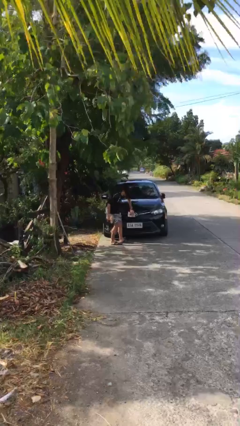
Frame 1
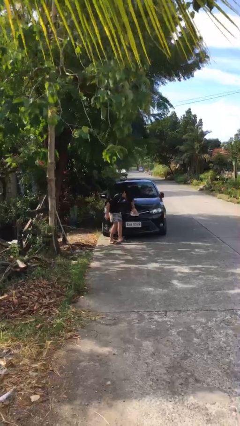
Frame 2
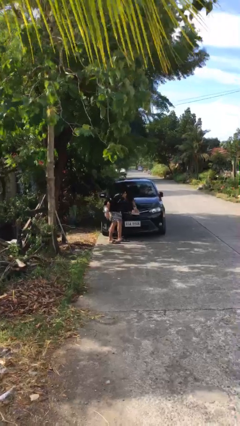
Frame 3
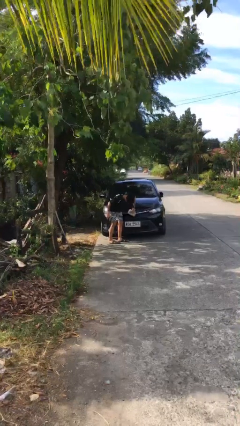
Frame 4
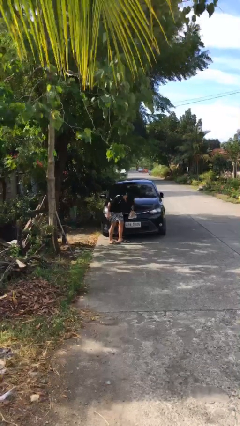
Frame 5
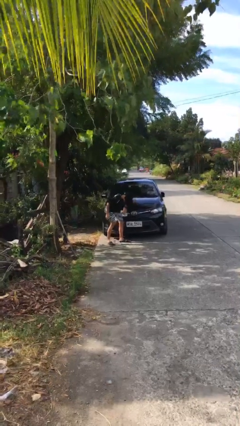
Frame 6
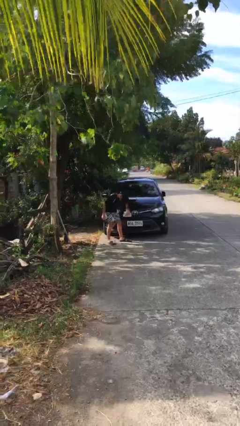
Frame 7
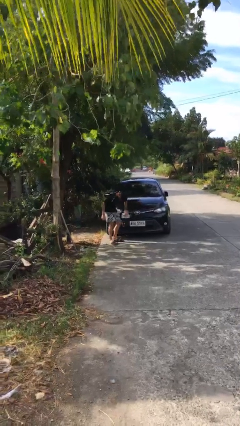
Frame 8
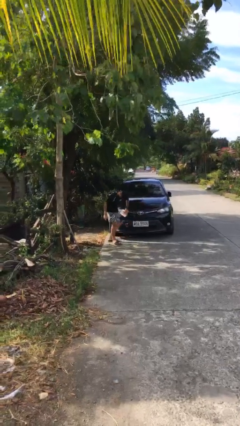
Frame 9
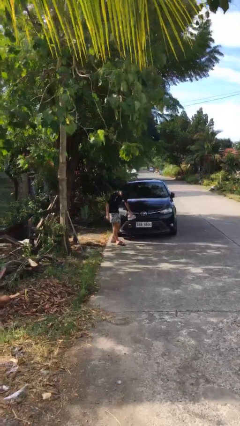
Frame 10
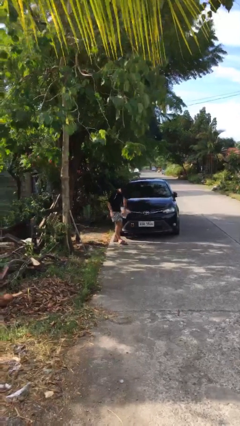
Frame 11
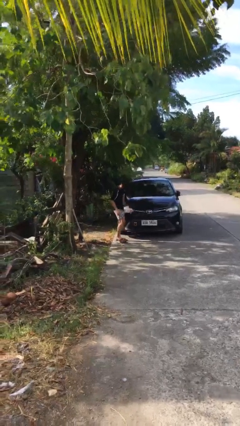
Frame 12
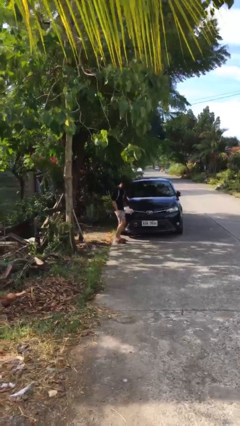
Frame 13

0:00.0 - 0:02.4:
person polishes car with rag

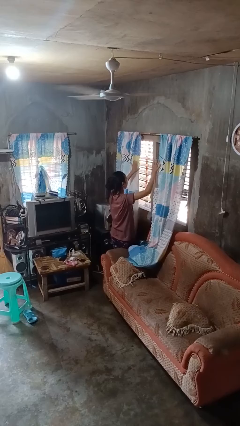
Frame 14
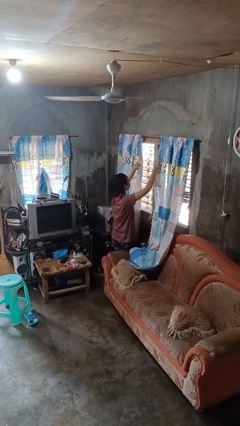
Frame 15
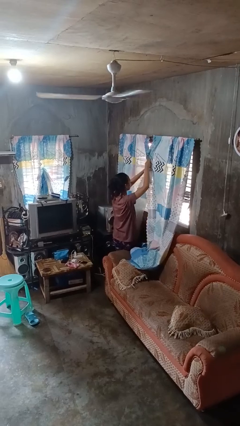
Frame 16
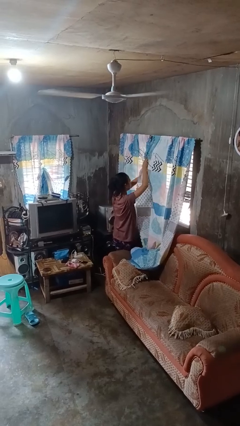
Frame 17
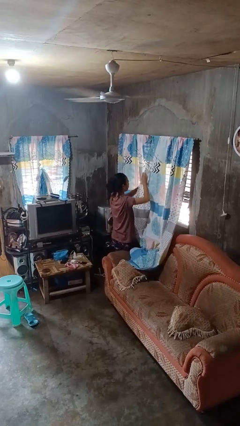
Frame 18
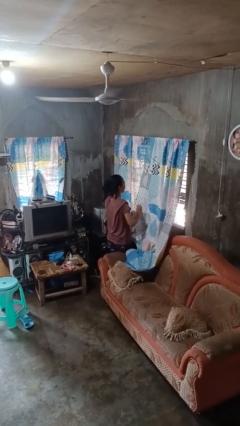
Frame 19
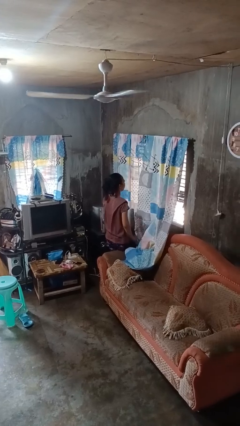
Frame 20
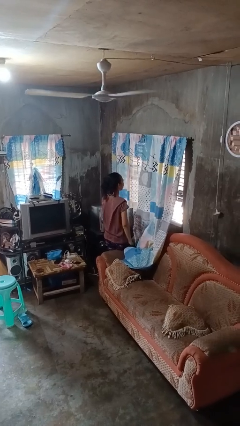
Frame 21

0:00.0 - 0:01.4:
person closes curtains

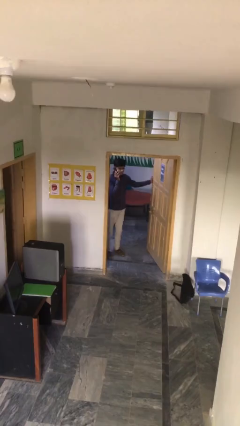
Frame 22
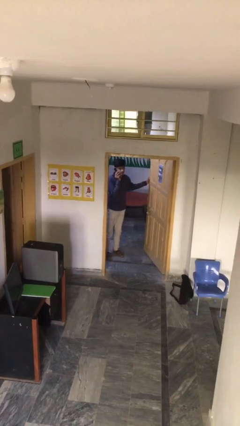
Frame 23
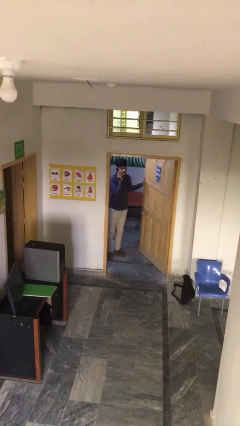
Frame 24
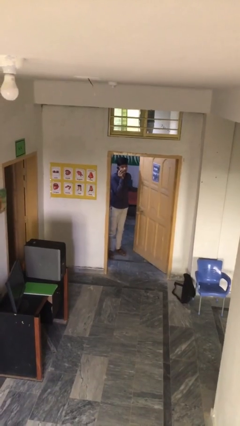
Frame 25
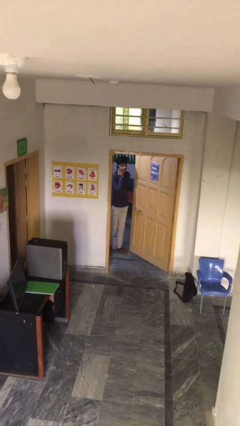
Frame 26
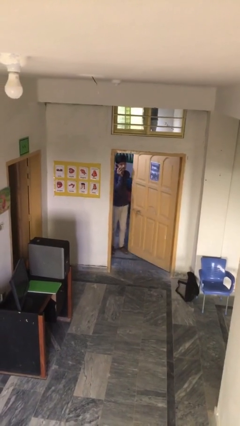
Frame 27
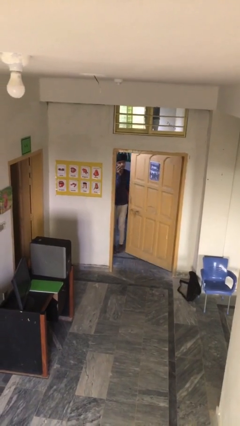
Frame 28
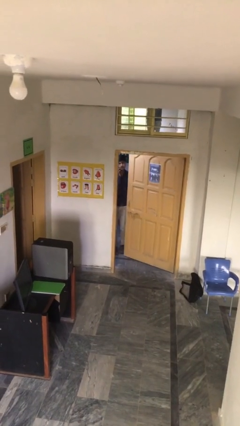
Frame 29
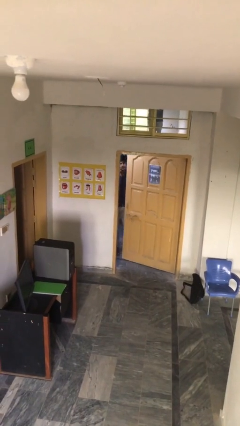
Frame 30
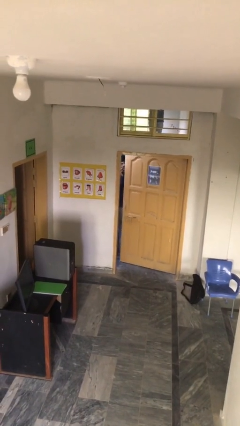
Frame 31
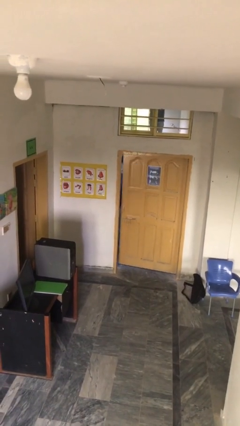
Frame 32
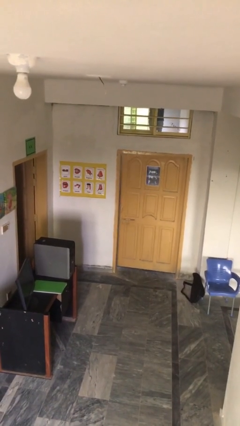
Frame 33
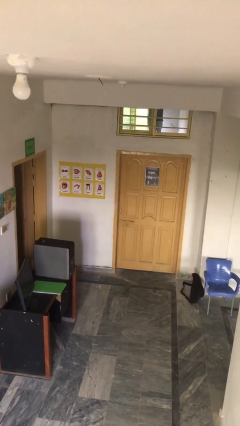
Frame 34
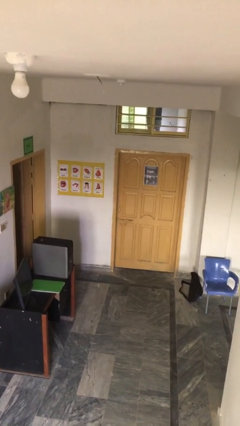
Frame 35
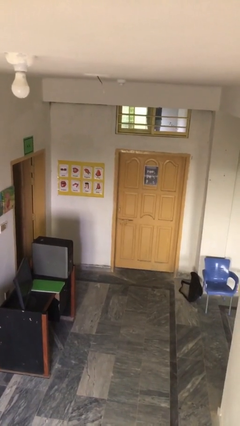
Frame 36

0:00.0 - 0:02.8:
person closes facility door

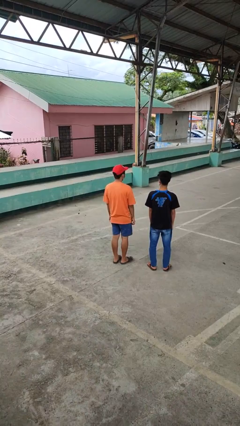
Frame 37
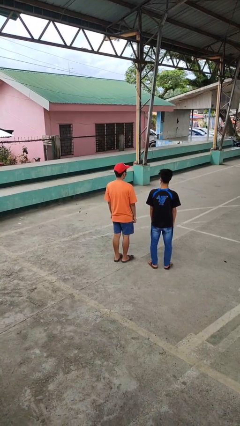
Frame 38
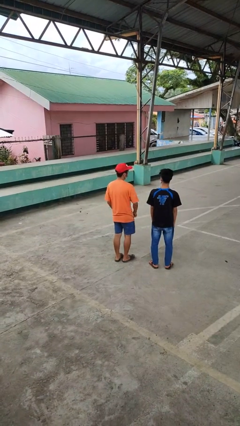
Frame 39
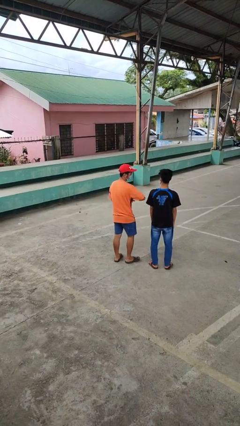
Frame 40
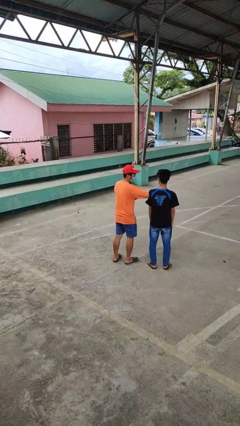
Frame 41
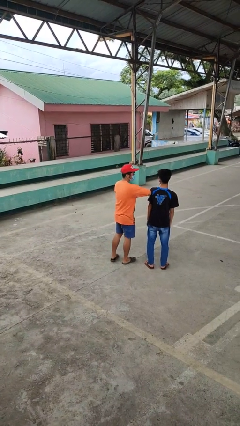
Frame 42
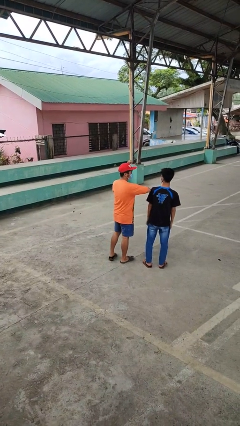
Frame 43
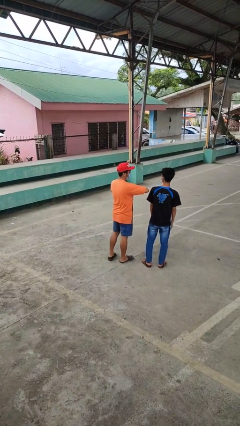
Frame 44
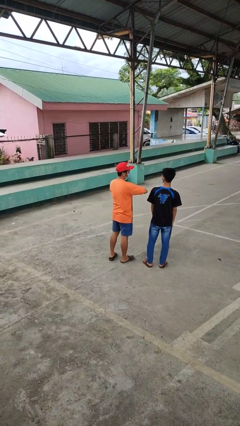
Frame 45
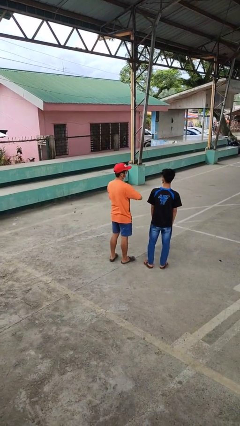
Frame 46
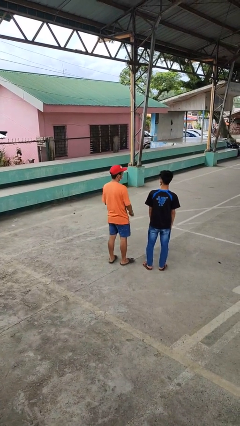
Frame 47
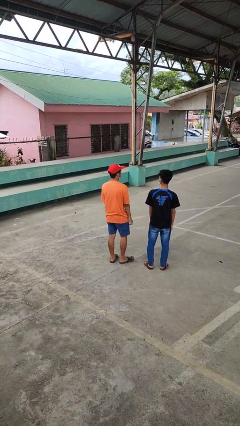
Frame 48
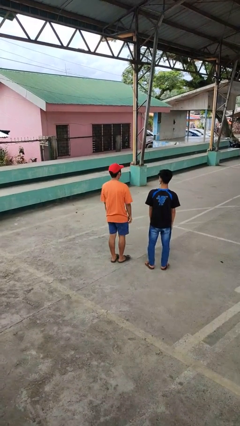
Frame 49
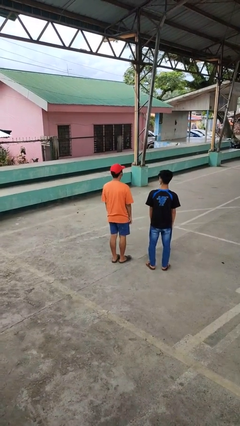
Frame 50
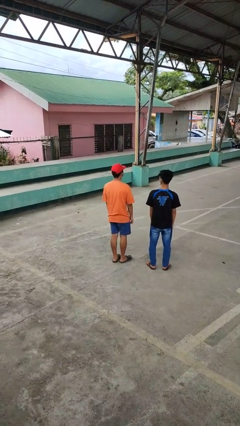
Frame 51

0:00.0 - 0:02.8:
person nudges person with elbow

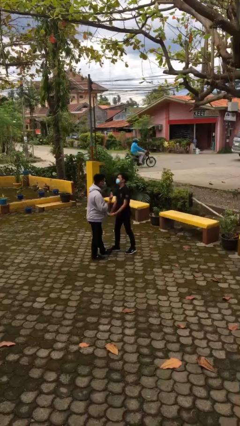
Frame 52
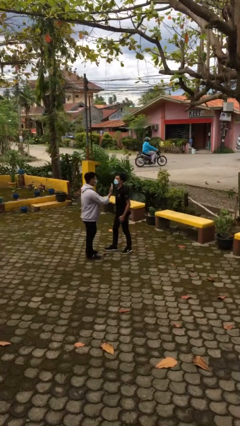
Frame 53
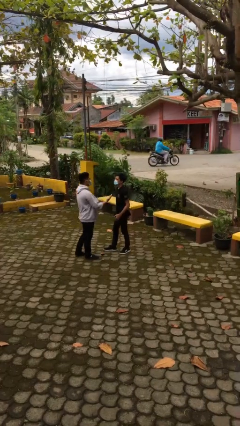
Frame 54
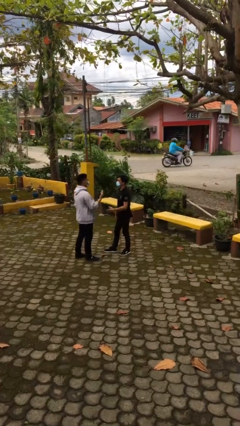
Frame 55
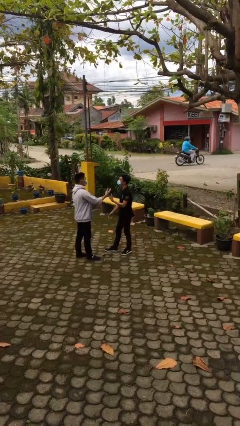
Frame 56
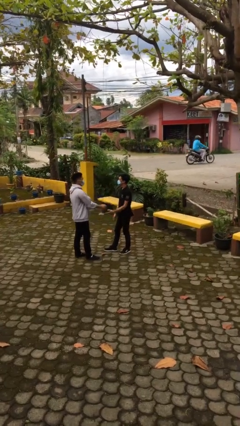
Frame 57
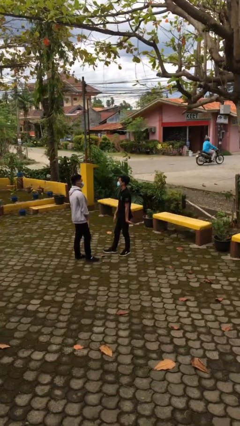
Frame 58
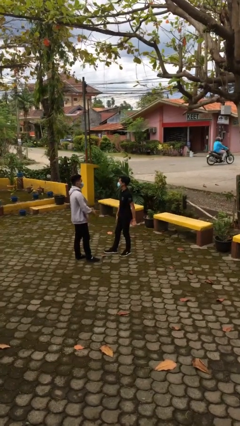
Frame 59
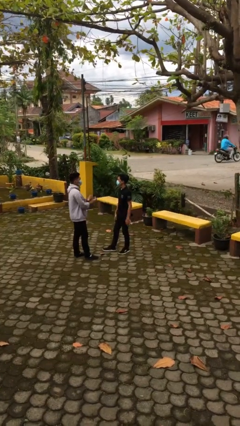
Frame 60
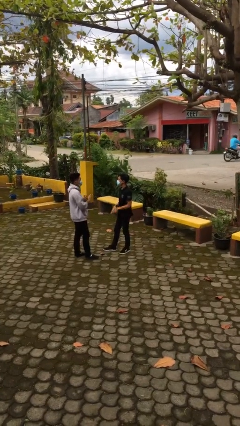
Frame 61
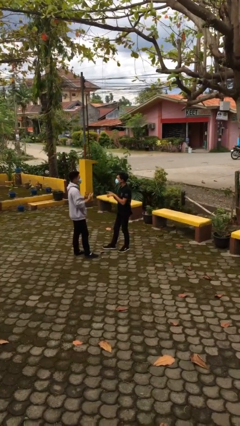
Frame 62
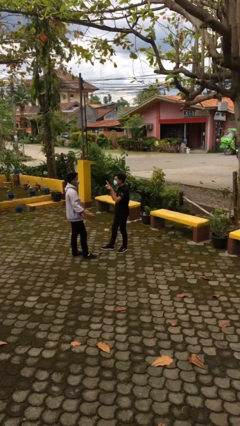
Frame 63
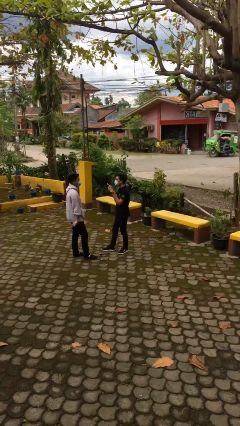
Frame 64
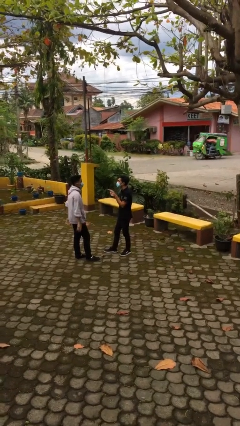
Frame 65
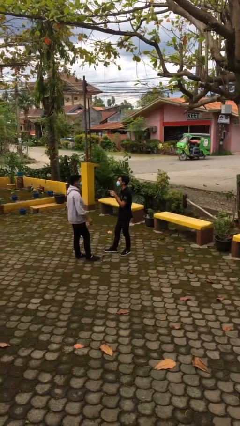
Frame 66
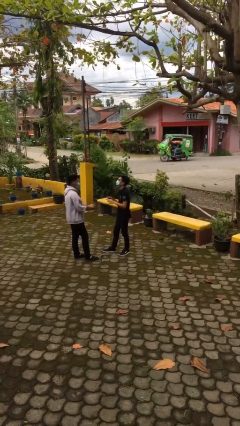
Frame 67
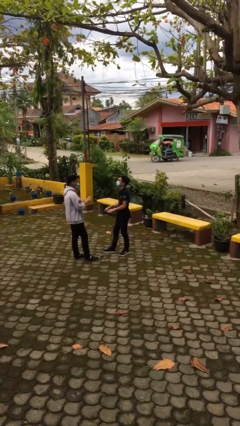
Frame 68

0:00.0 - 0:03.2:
person talks to person

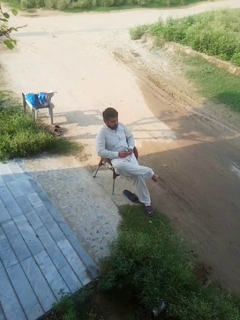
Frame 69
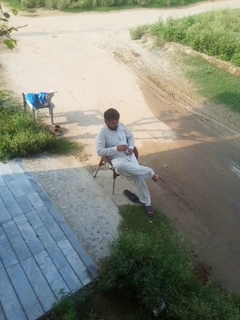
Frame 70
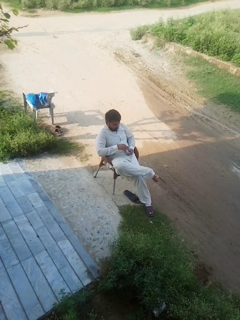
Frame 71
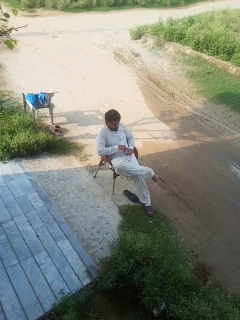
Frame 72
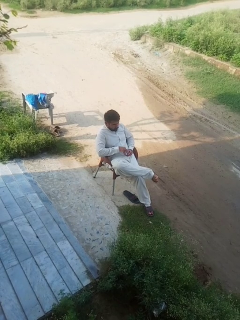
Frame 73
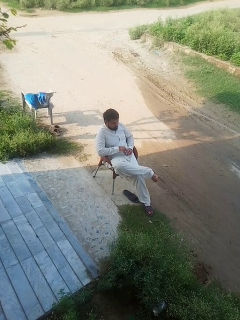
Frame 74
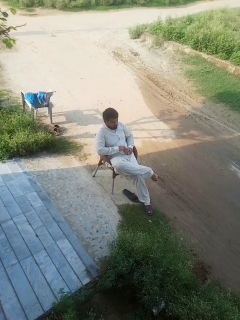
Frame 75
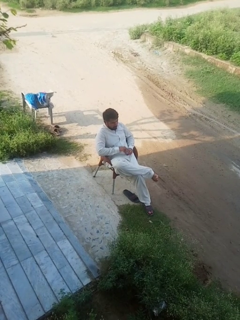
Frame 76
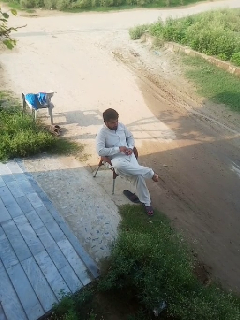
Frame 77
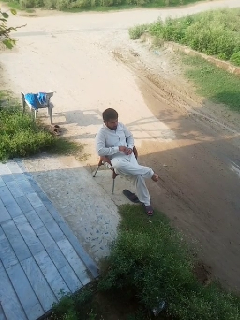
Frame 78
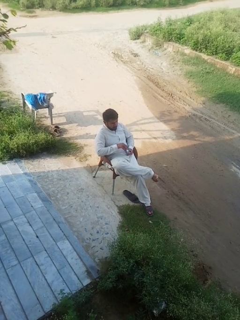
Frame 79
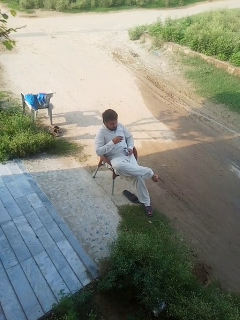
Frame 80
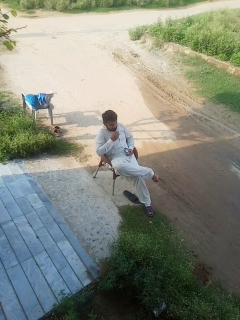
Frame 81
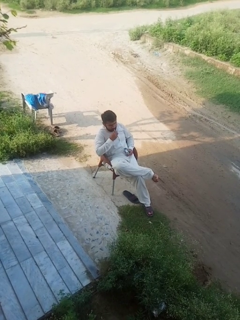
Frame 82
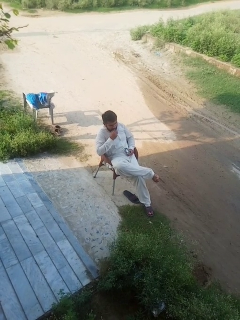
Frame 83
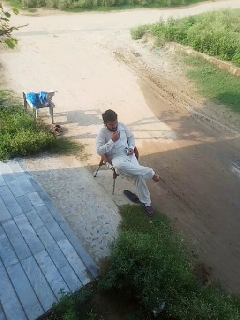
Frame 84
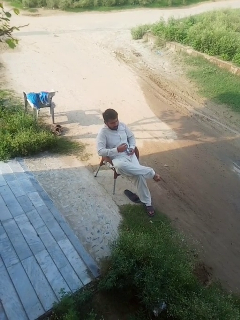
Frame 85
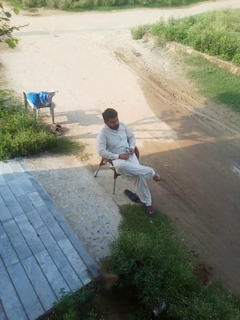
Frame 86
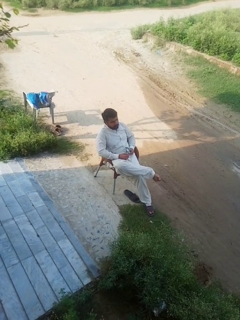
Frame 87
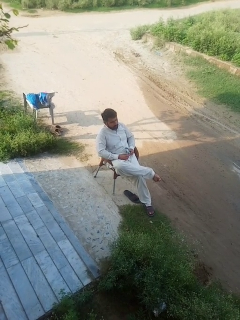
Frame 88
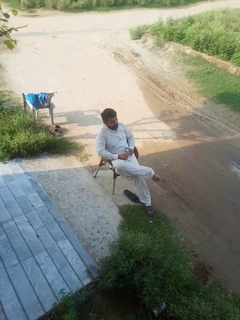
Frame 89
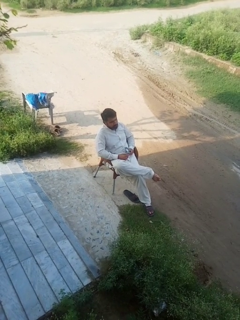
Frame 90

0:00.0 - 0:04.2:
person eats snack from bag

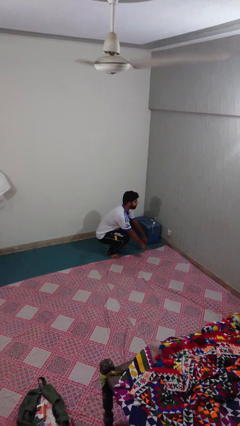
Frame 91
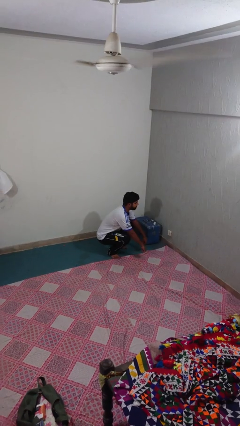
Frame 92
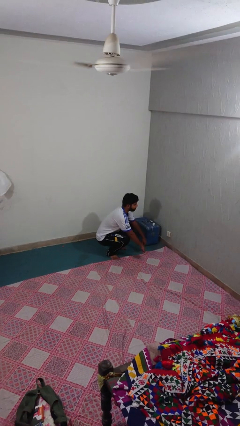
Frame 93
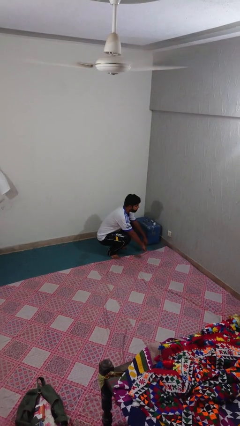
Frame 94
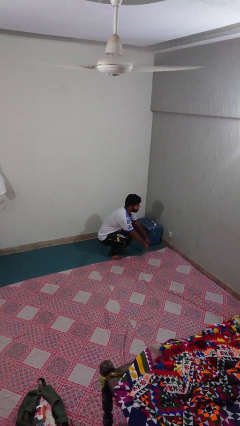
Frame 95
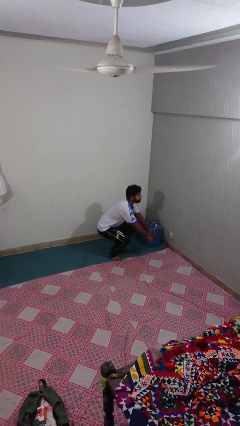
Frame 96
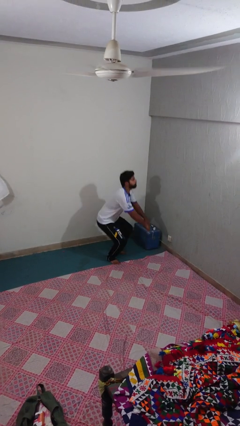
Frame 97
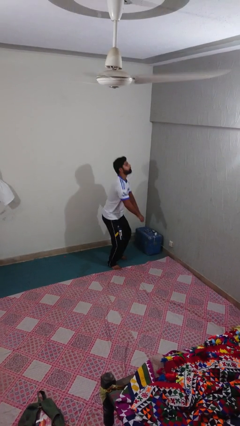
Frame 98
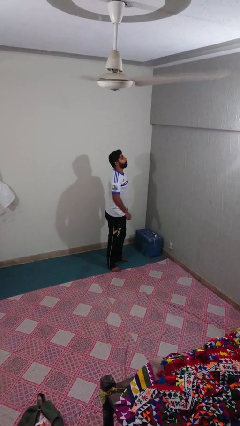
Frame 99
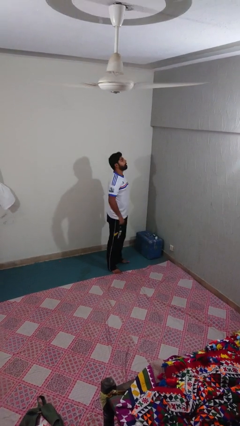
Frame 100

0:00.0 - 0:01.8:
person stands up
